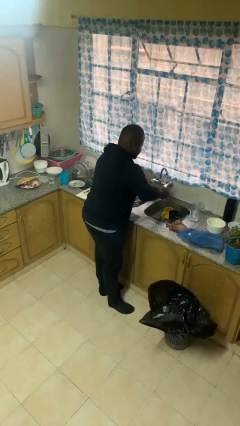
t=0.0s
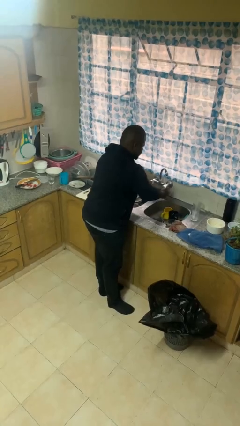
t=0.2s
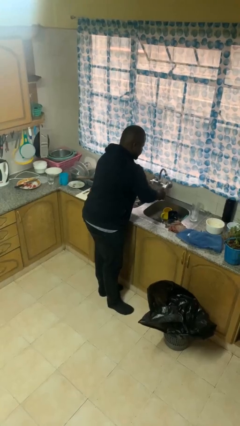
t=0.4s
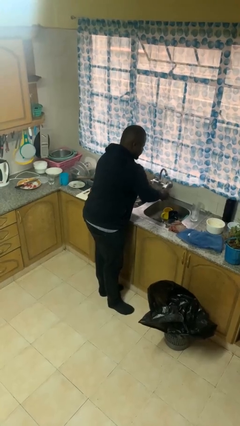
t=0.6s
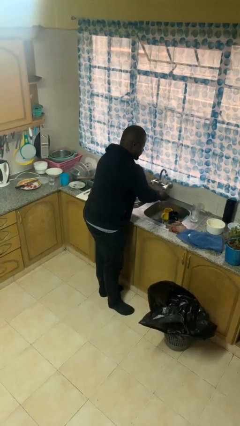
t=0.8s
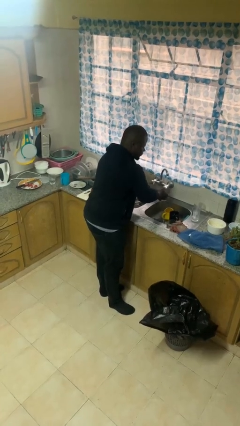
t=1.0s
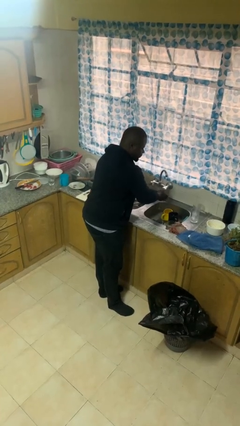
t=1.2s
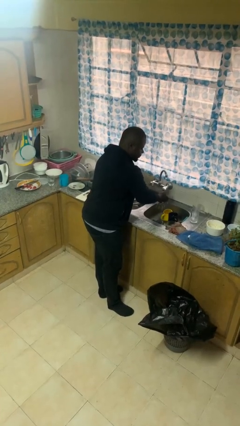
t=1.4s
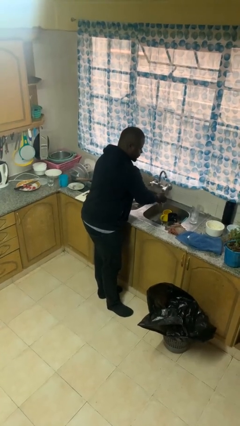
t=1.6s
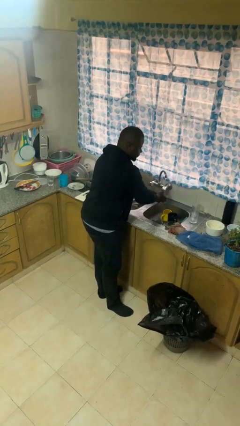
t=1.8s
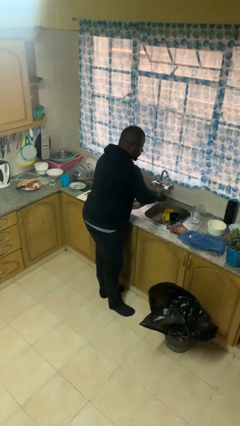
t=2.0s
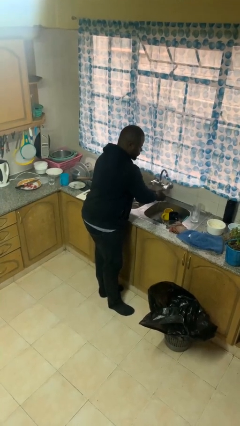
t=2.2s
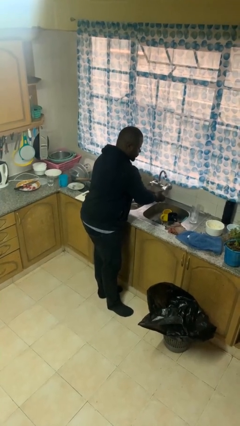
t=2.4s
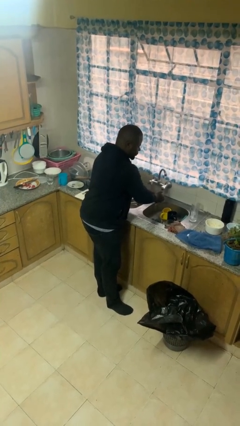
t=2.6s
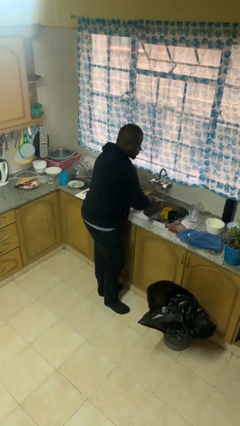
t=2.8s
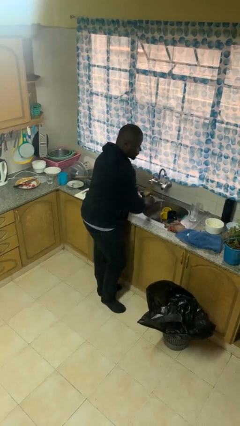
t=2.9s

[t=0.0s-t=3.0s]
person washes hands

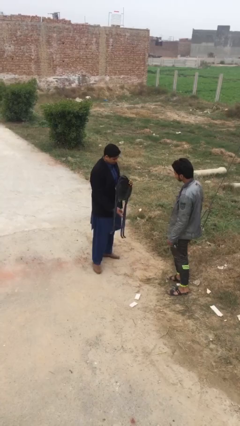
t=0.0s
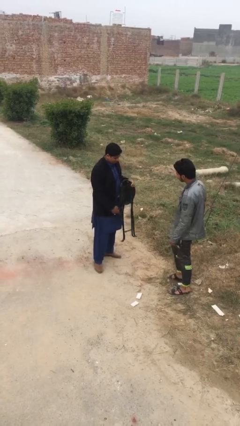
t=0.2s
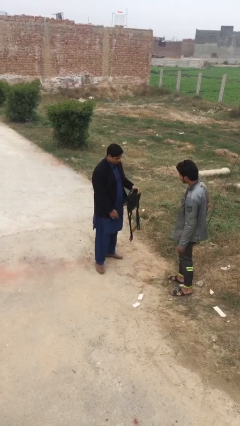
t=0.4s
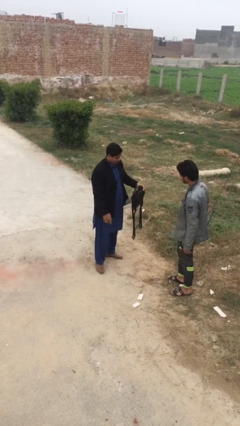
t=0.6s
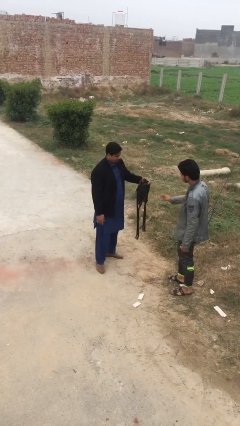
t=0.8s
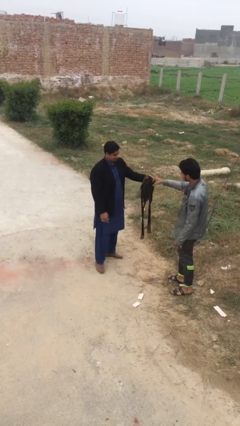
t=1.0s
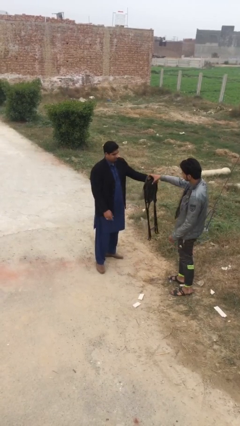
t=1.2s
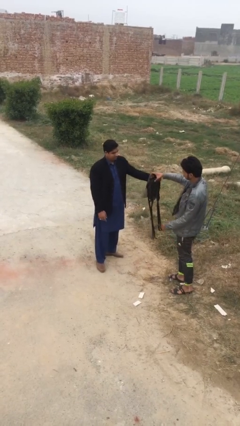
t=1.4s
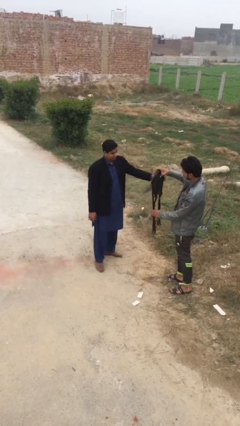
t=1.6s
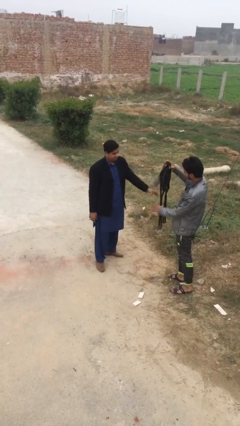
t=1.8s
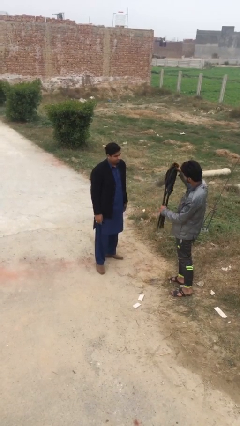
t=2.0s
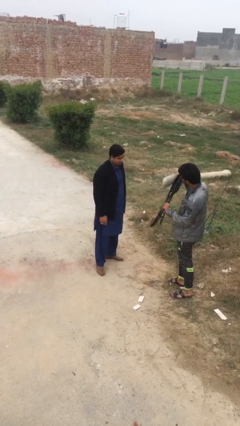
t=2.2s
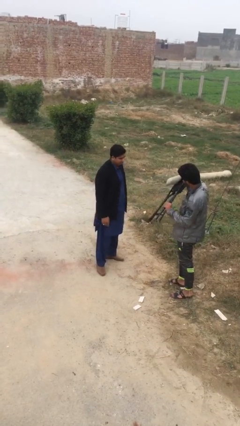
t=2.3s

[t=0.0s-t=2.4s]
person transfers object to person

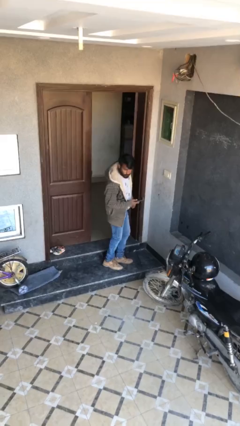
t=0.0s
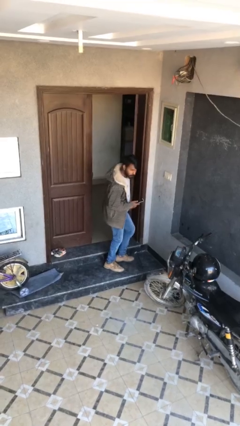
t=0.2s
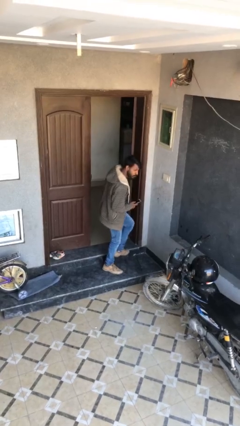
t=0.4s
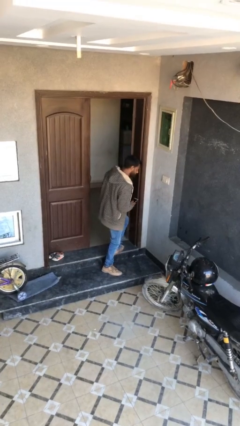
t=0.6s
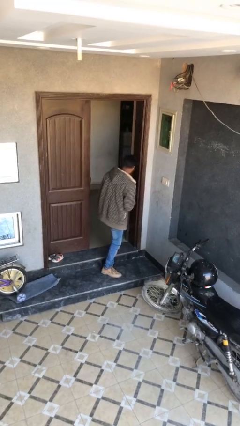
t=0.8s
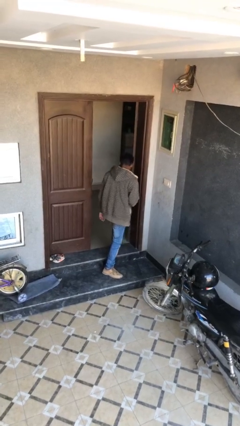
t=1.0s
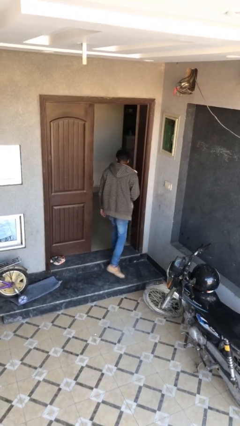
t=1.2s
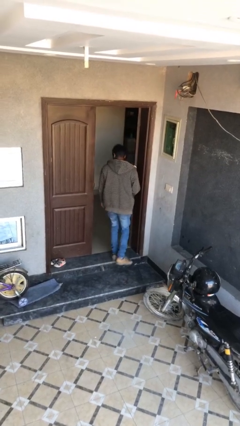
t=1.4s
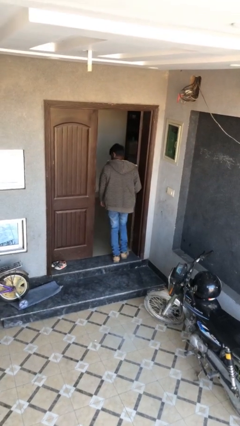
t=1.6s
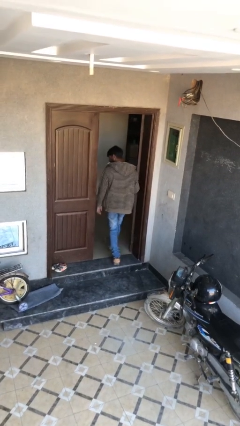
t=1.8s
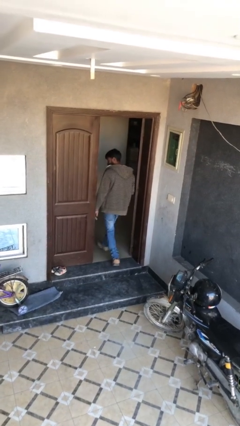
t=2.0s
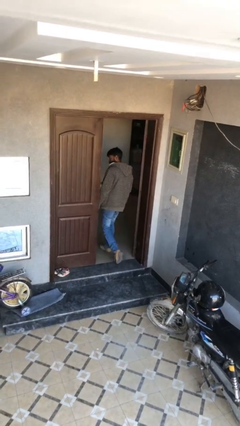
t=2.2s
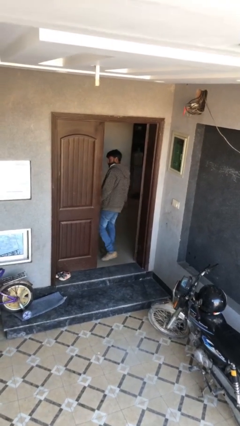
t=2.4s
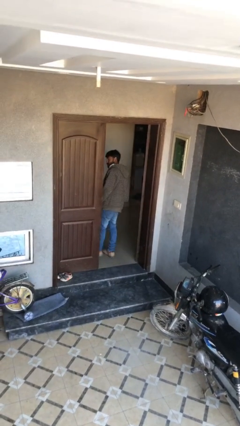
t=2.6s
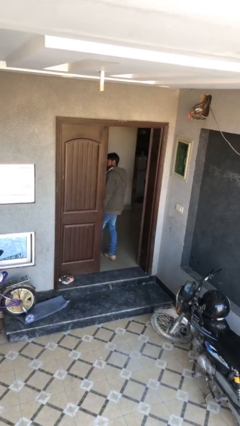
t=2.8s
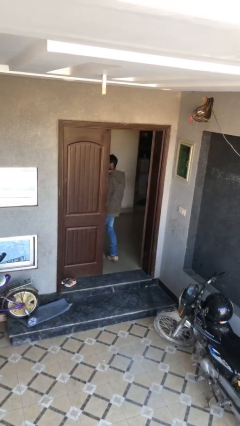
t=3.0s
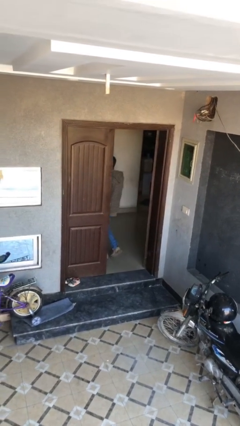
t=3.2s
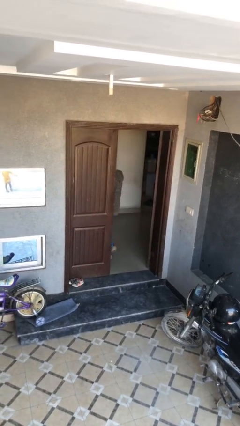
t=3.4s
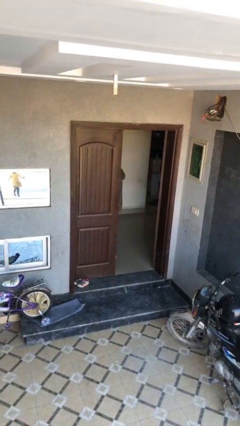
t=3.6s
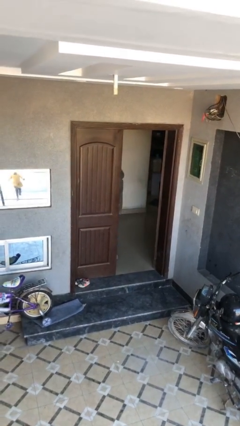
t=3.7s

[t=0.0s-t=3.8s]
person exits scene through structure

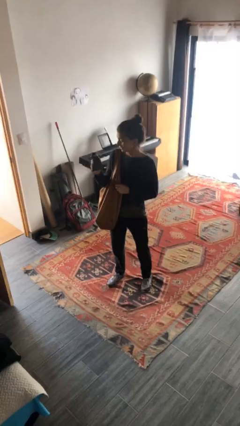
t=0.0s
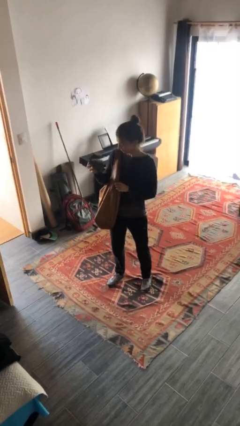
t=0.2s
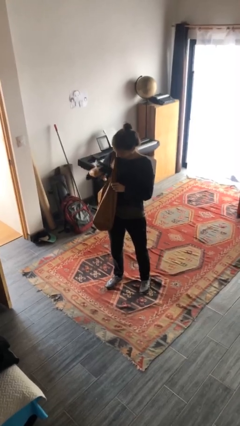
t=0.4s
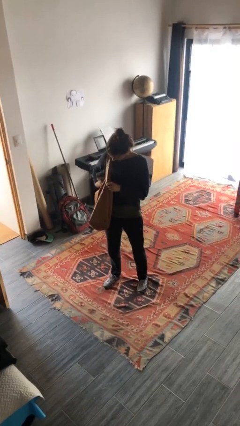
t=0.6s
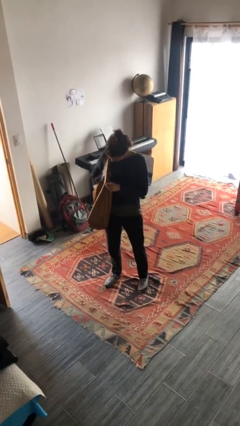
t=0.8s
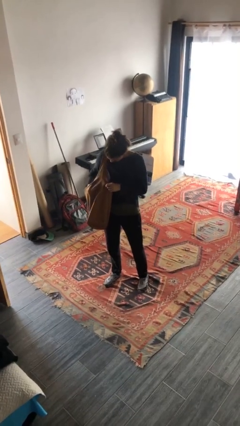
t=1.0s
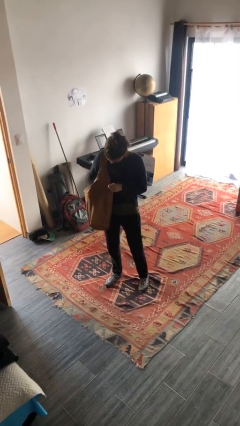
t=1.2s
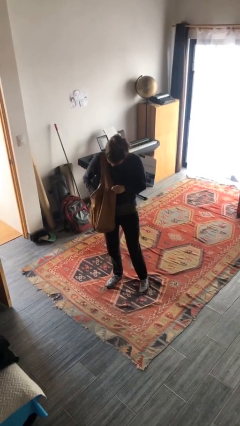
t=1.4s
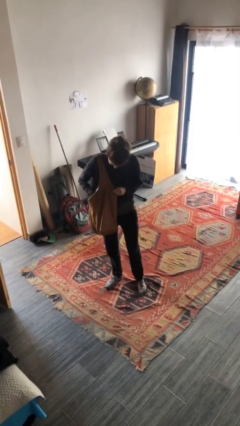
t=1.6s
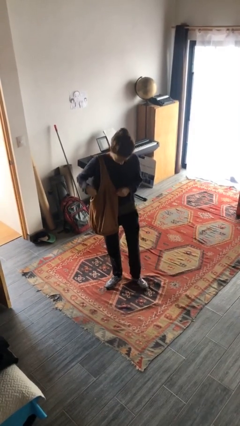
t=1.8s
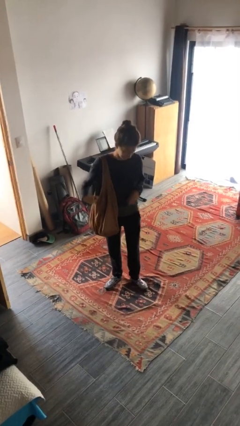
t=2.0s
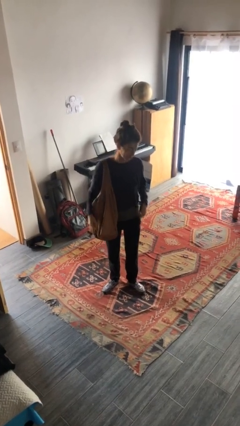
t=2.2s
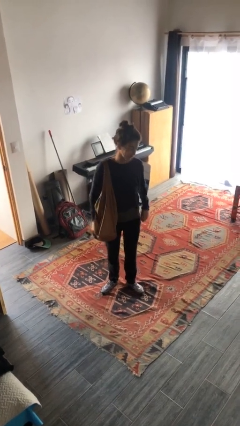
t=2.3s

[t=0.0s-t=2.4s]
person puts object into purse

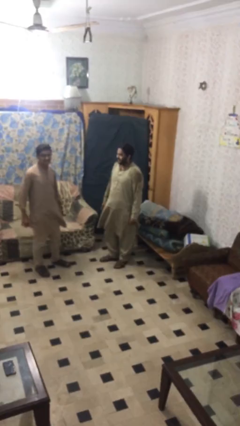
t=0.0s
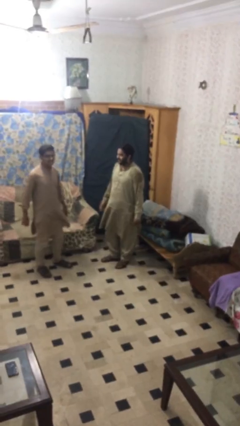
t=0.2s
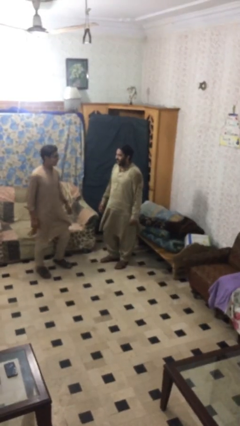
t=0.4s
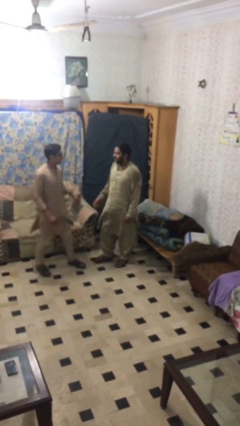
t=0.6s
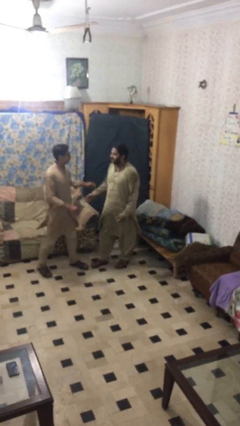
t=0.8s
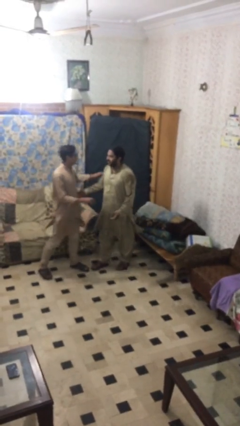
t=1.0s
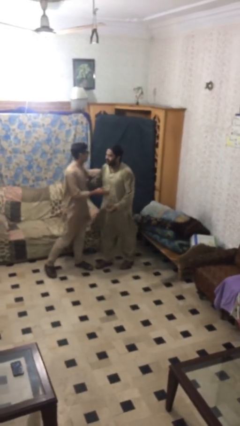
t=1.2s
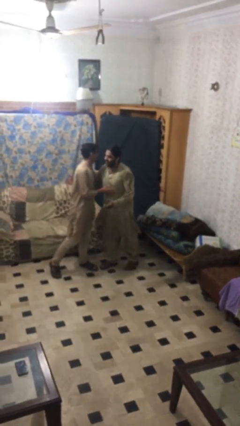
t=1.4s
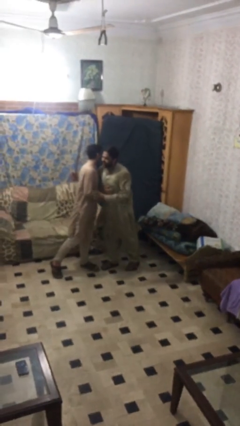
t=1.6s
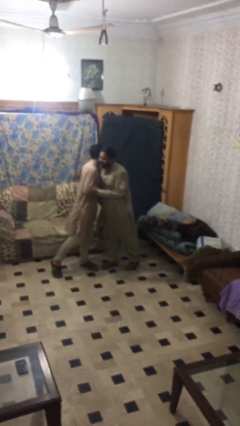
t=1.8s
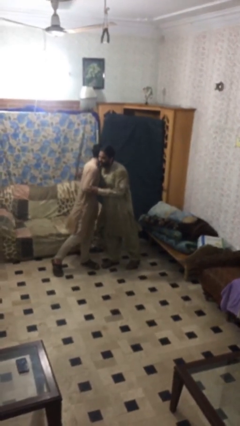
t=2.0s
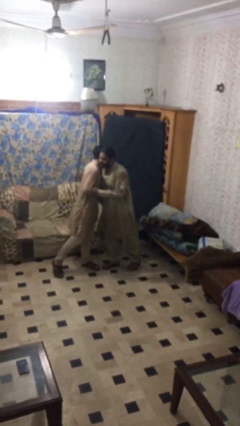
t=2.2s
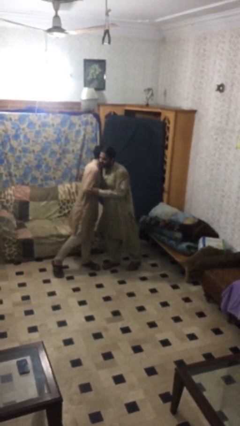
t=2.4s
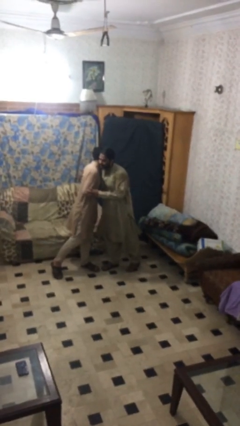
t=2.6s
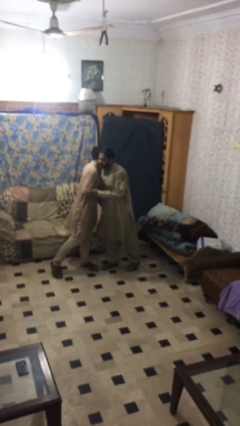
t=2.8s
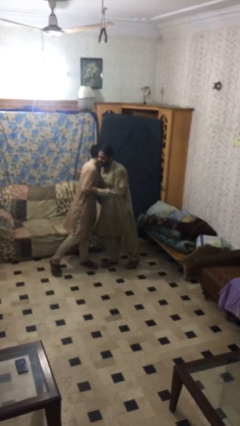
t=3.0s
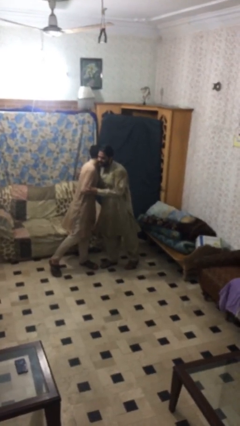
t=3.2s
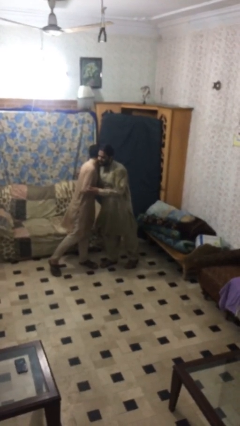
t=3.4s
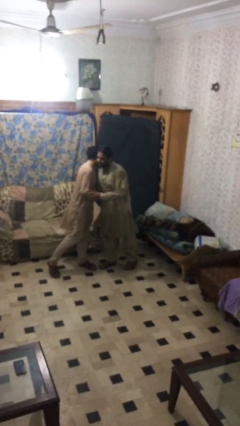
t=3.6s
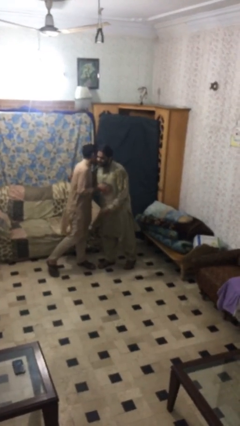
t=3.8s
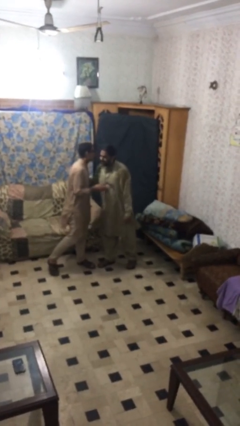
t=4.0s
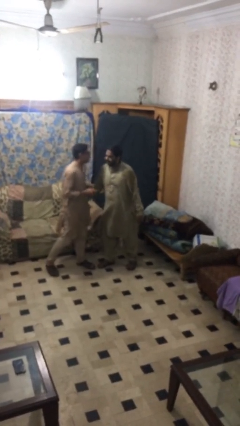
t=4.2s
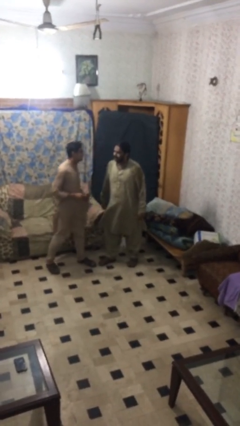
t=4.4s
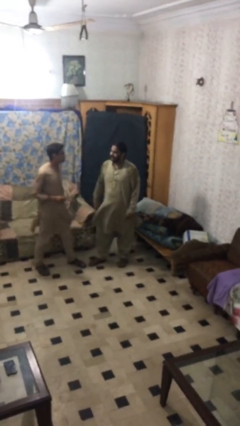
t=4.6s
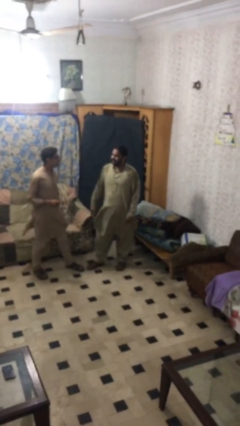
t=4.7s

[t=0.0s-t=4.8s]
person embraces person

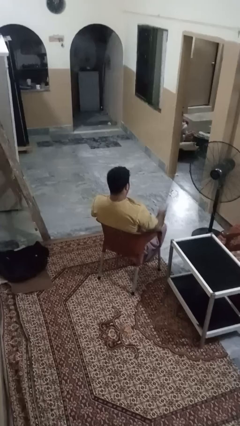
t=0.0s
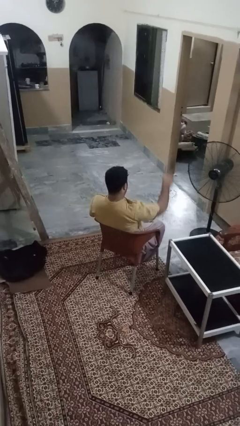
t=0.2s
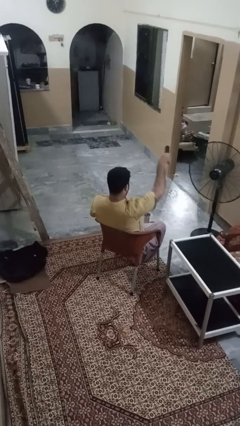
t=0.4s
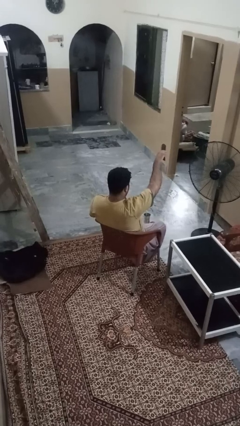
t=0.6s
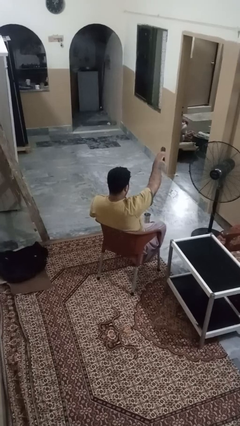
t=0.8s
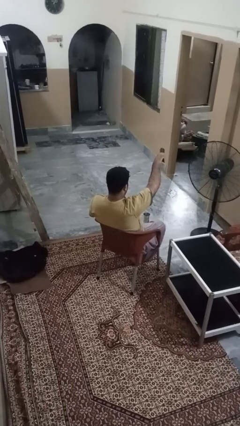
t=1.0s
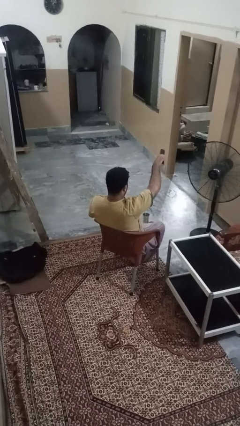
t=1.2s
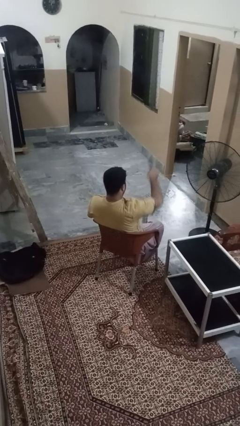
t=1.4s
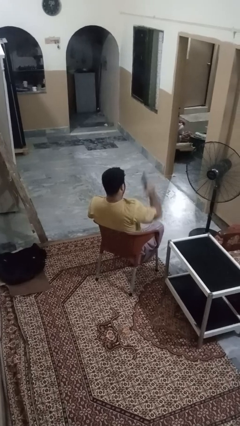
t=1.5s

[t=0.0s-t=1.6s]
person uses television remote
